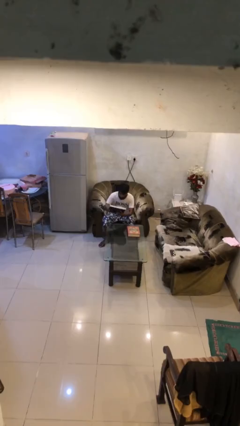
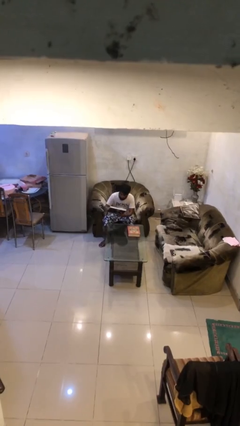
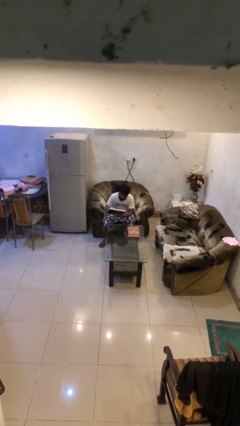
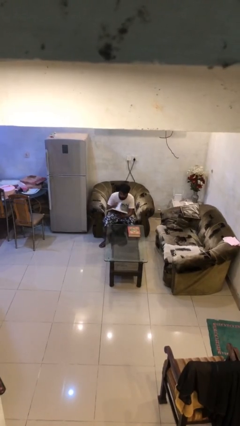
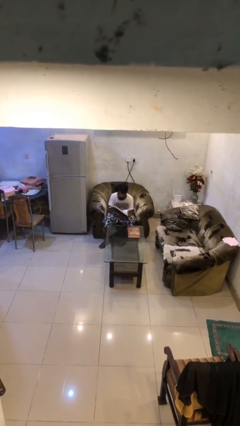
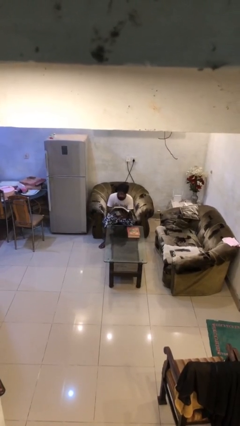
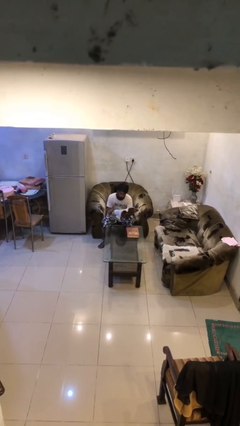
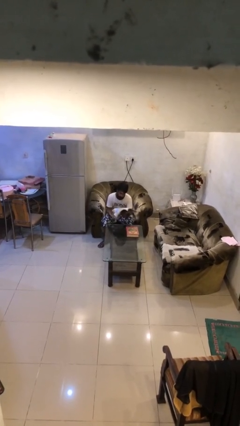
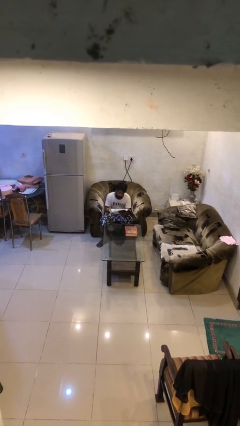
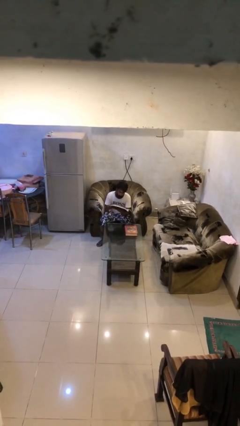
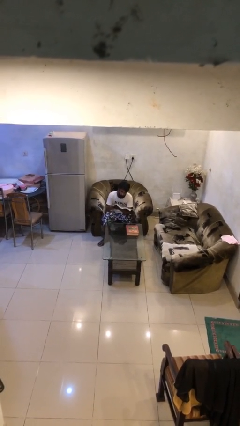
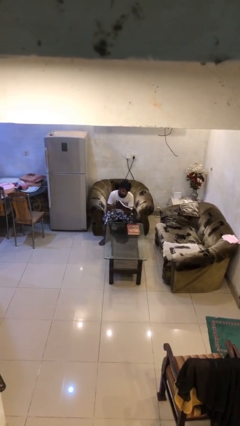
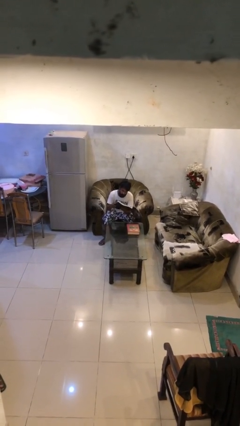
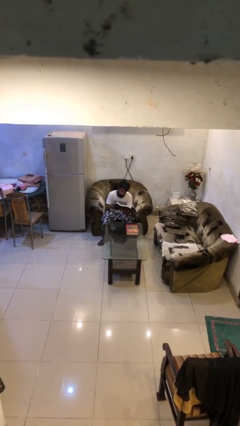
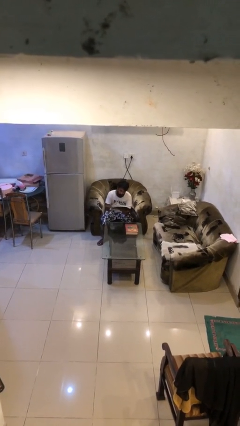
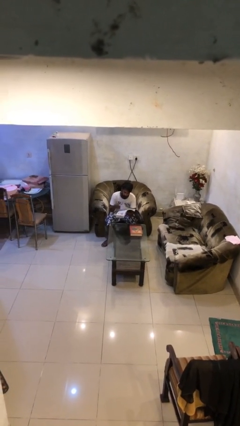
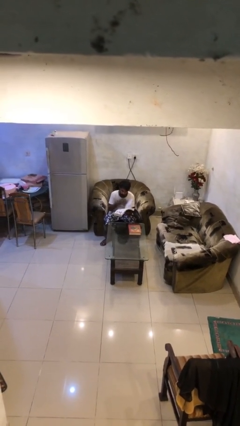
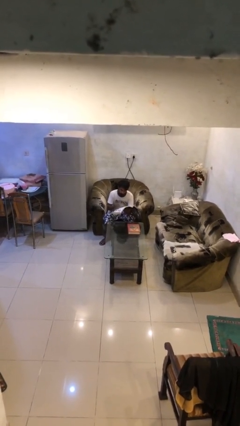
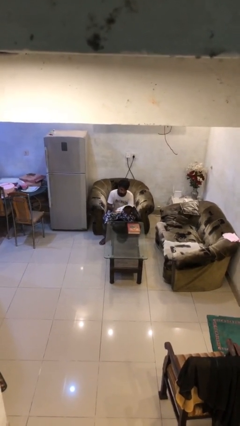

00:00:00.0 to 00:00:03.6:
person reads document

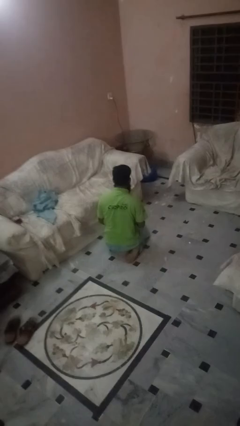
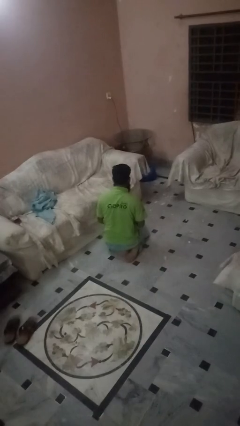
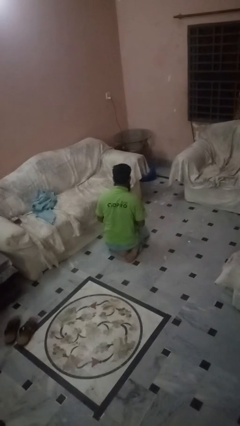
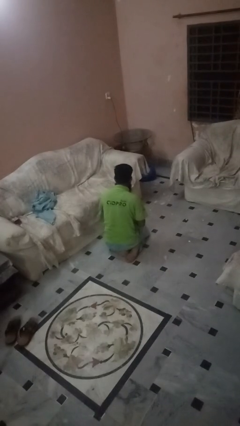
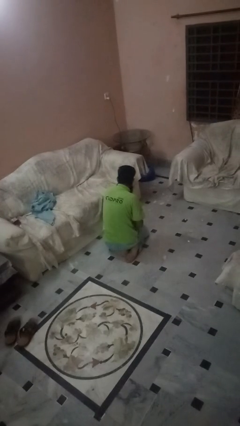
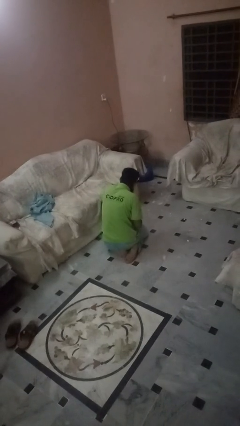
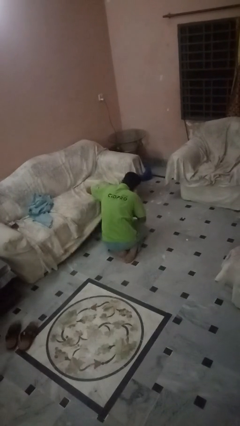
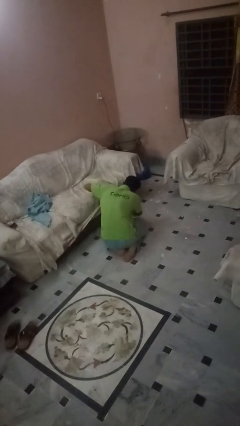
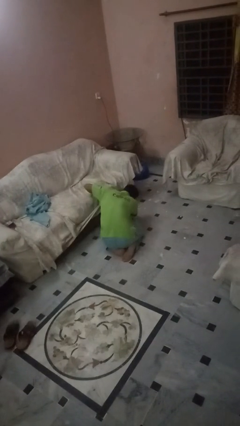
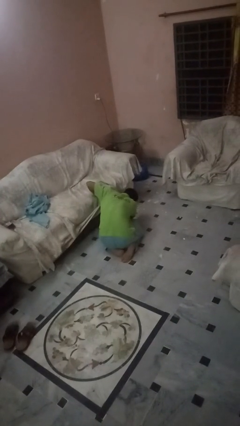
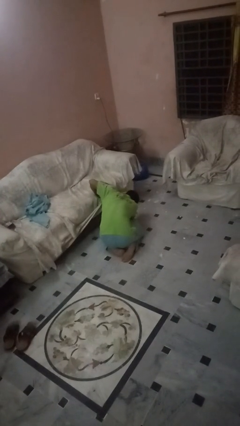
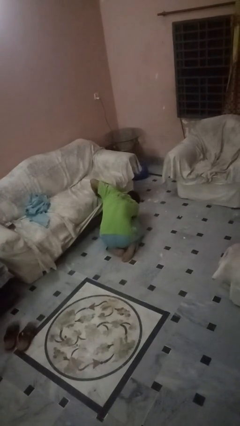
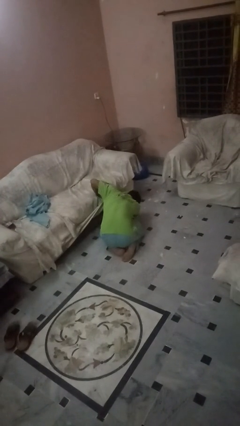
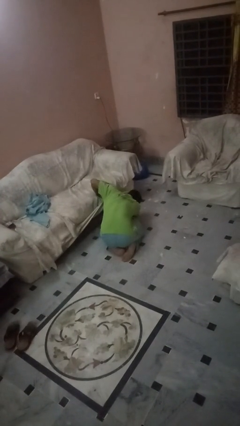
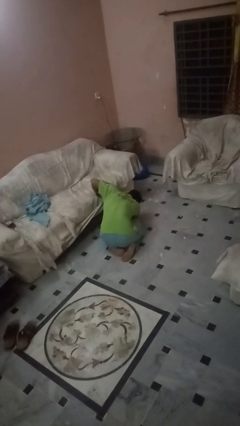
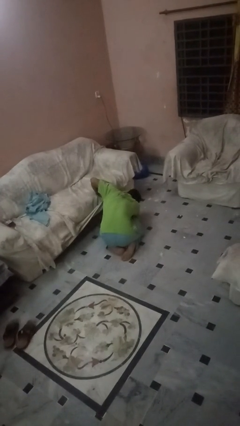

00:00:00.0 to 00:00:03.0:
person searches under couch

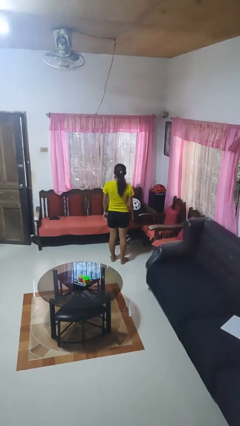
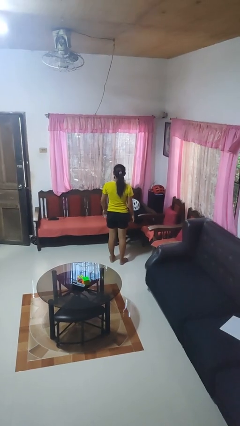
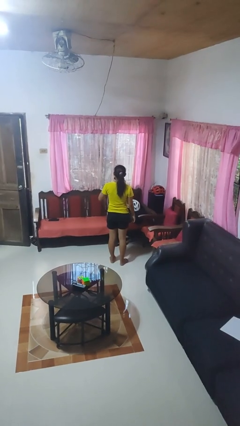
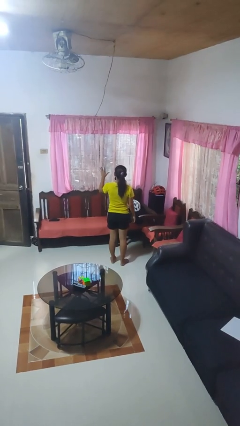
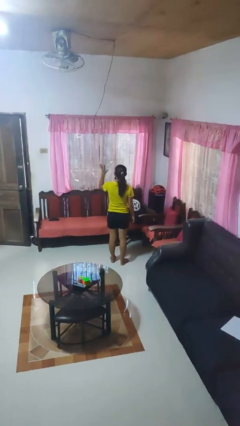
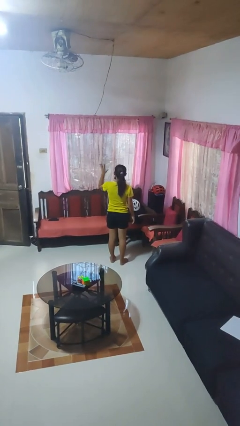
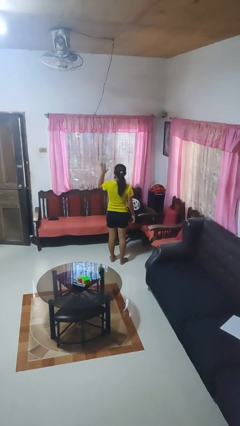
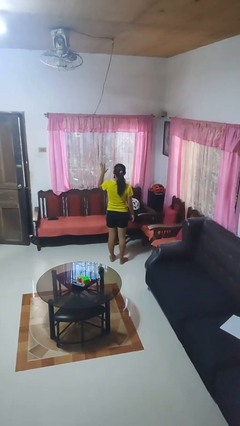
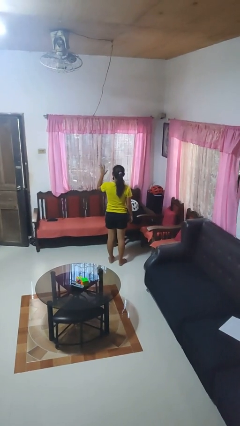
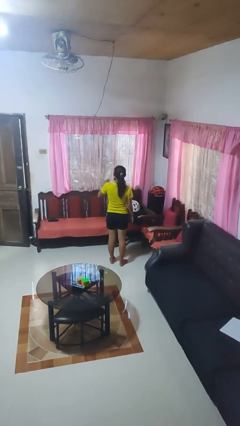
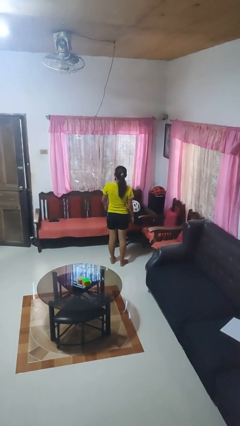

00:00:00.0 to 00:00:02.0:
person gestures number five

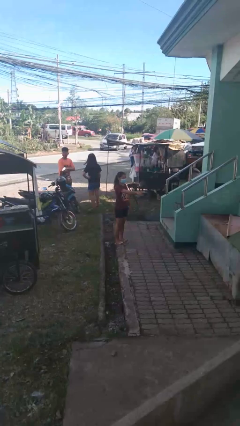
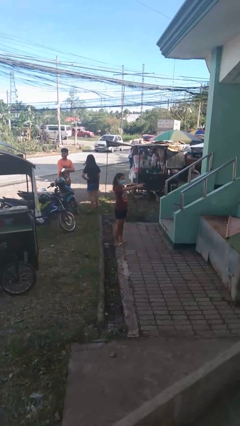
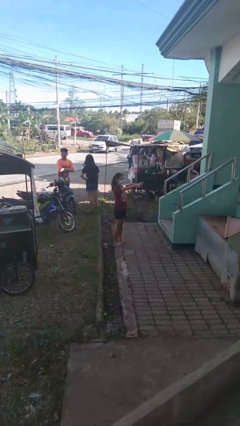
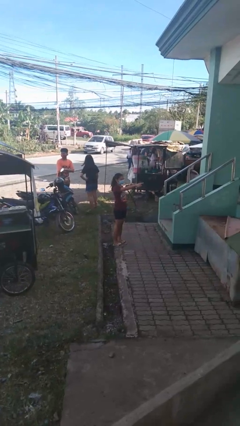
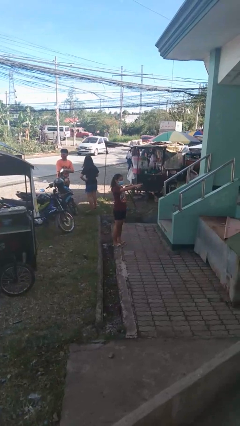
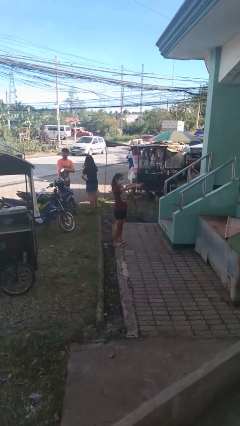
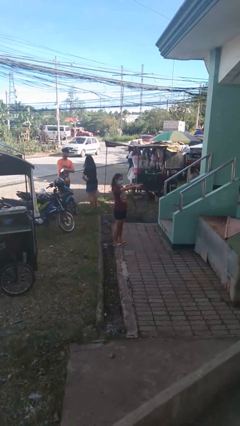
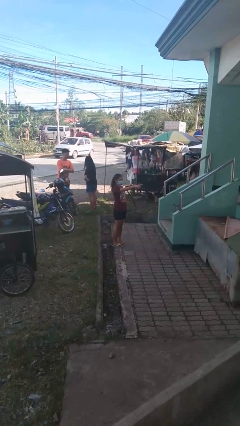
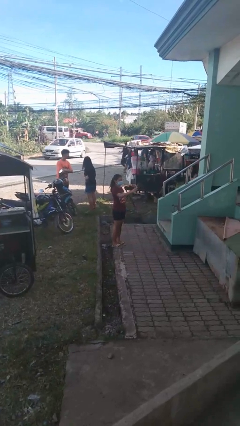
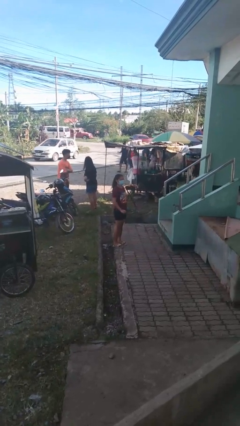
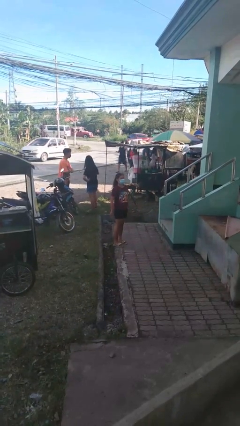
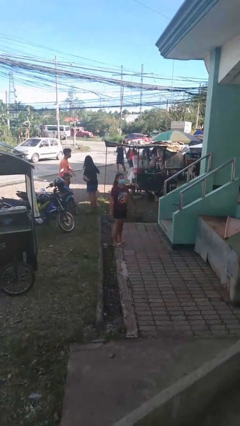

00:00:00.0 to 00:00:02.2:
person points at person

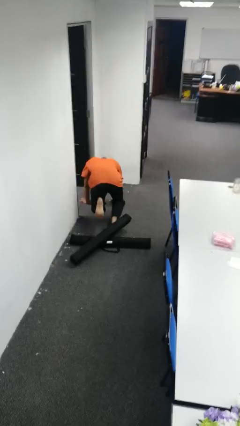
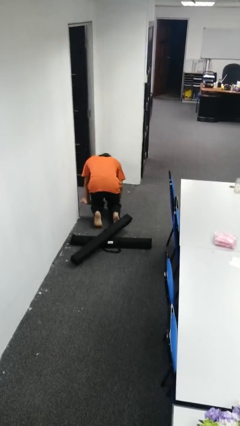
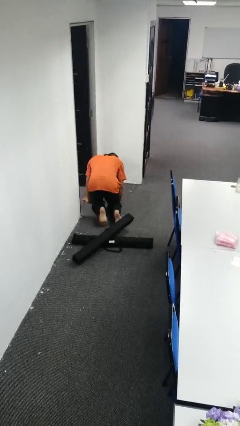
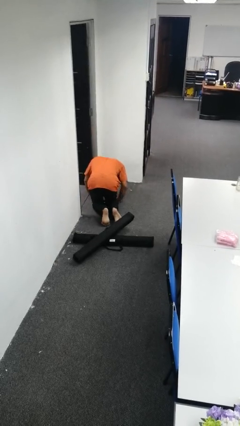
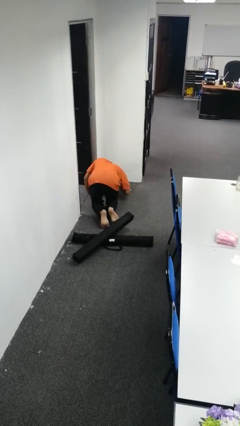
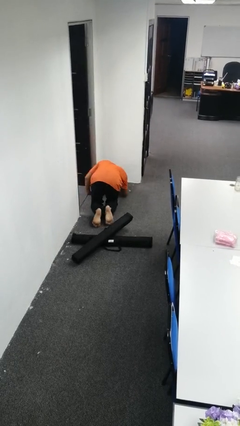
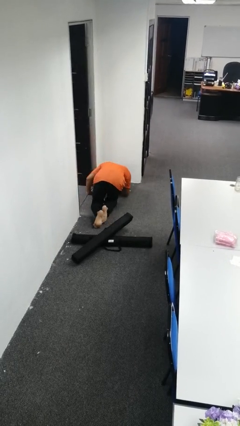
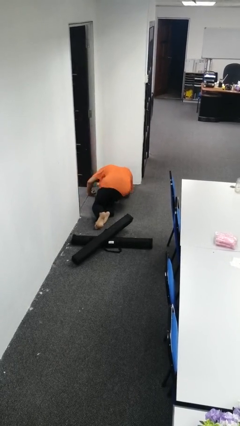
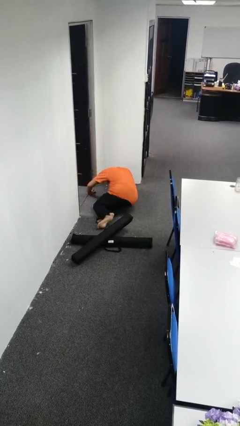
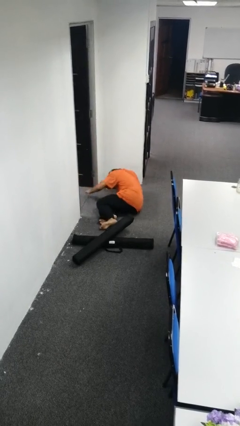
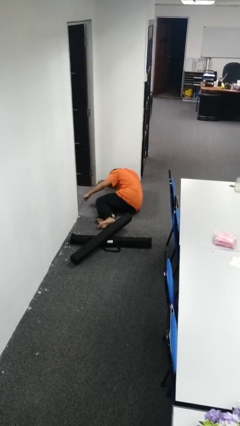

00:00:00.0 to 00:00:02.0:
person lies down on floor

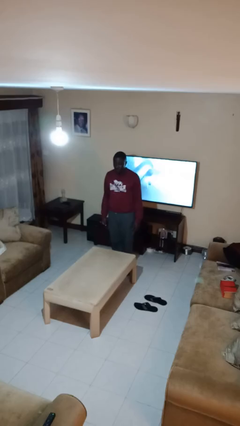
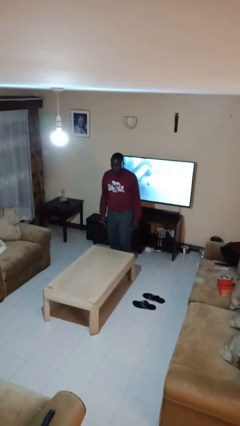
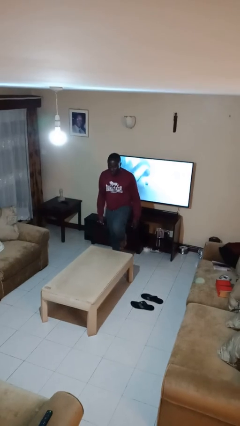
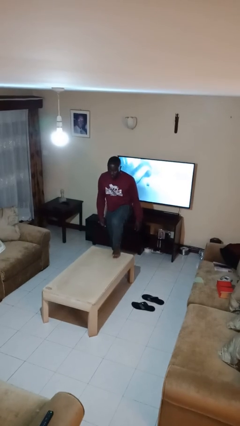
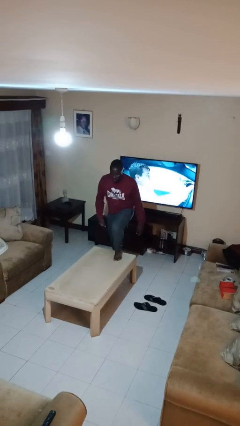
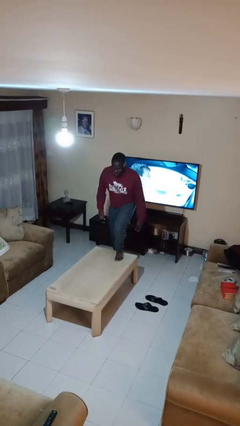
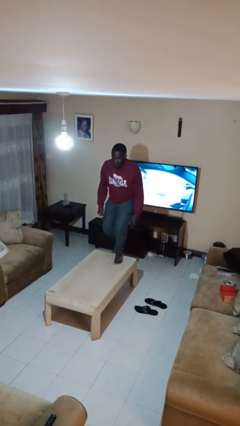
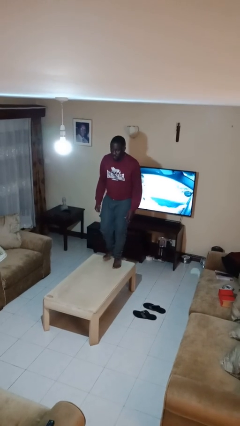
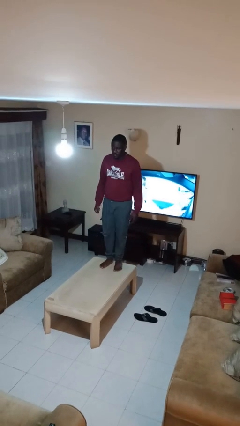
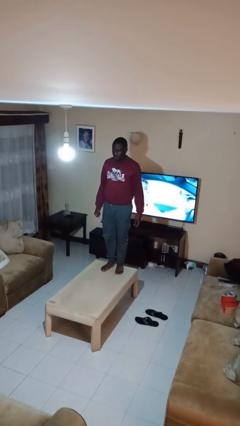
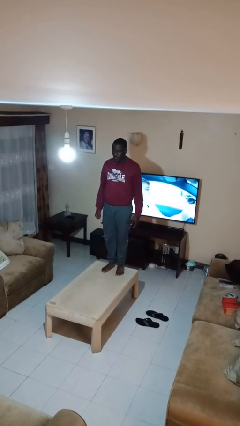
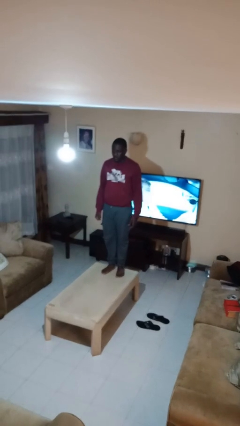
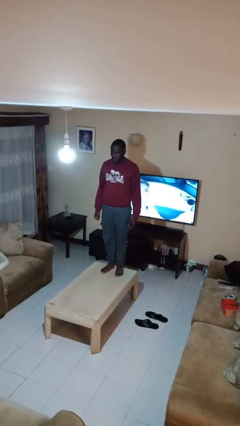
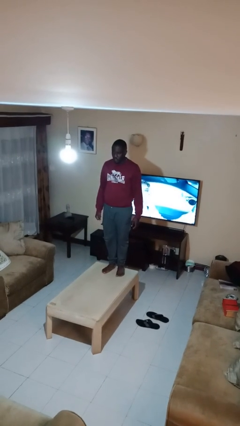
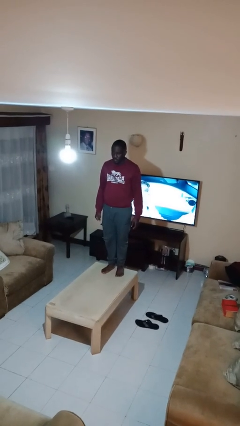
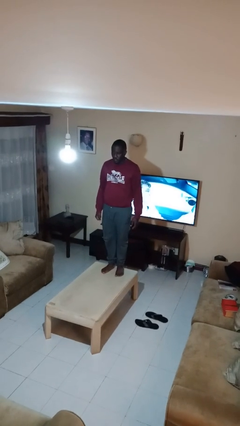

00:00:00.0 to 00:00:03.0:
person climbs on table

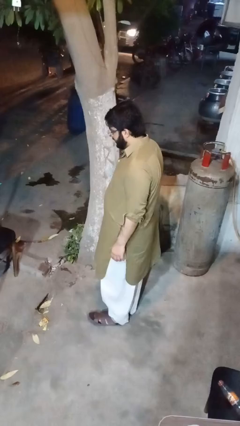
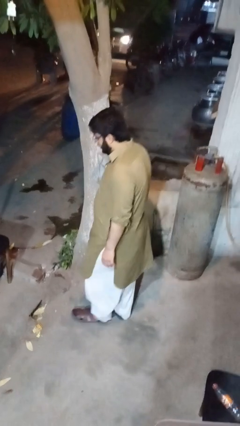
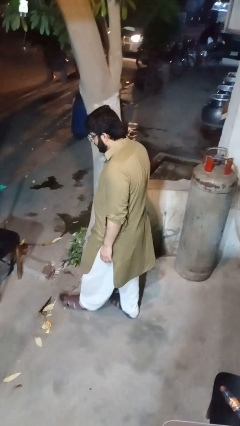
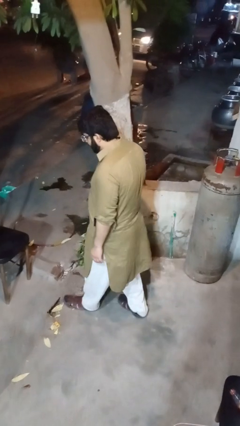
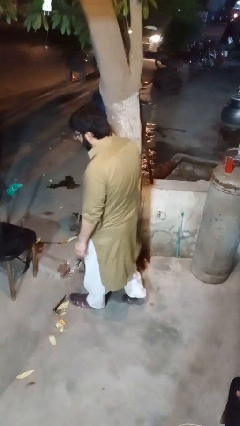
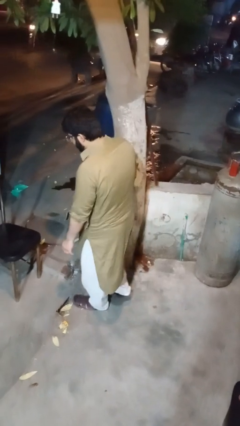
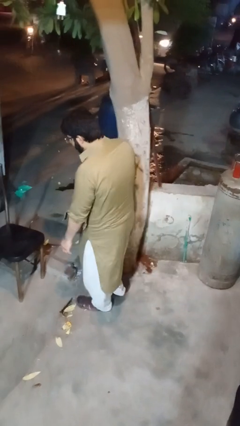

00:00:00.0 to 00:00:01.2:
person trips on object on floor

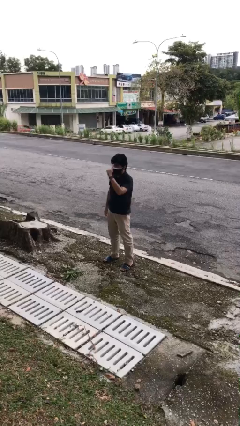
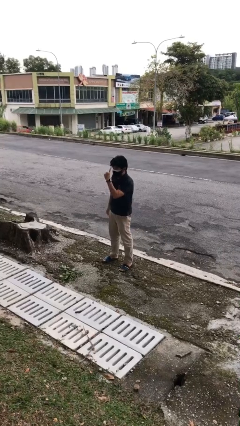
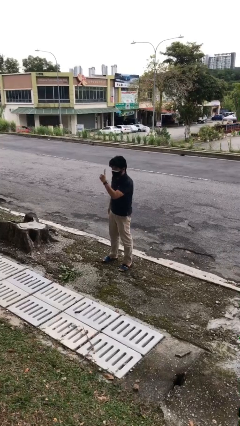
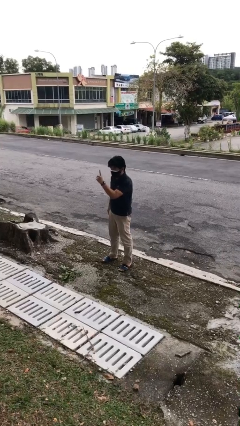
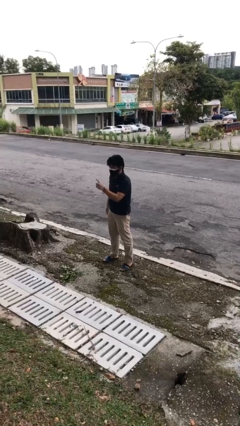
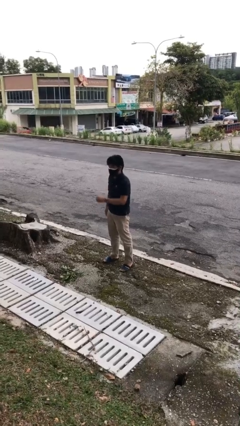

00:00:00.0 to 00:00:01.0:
person gestures number one
